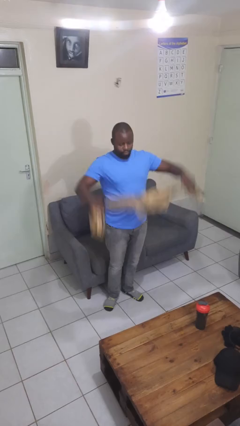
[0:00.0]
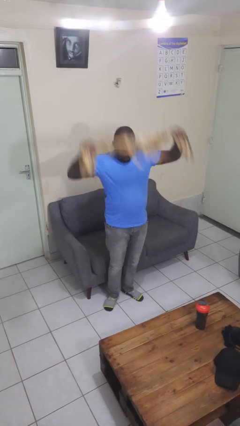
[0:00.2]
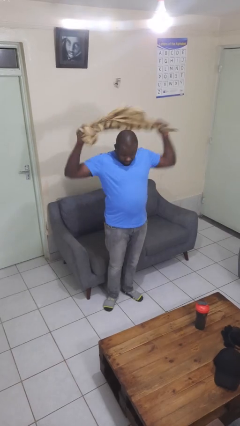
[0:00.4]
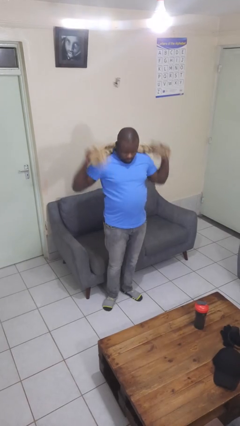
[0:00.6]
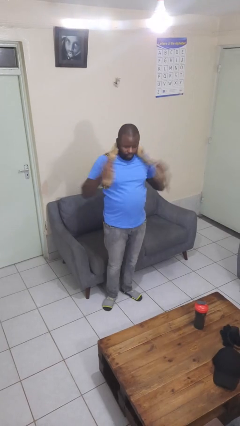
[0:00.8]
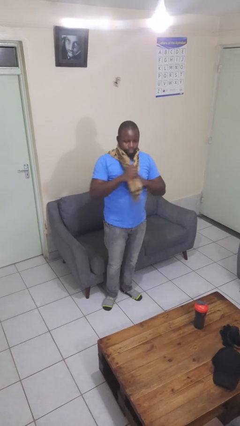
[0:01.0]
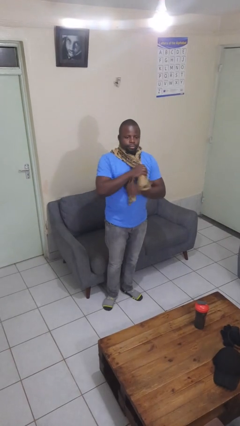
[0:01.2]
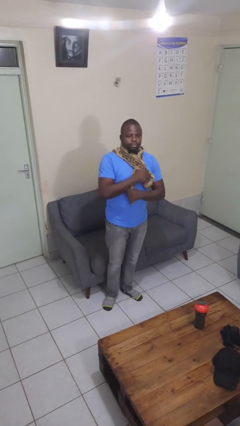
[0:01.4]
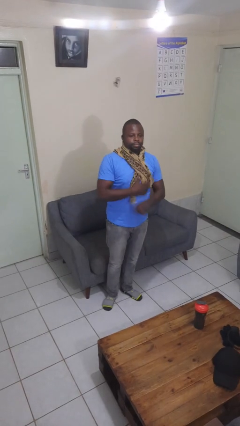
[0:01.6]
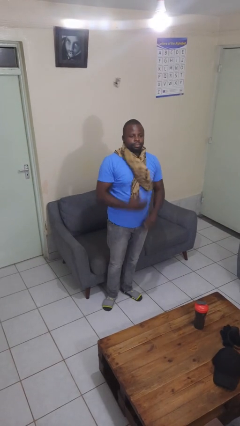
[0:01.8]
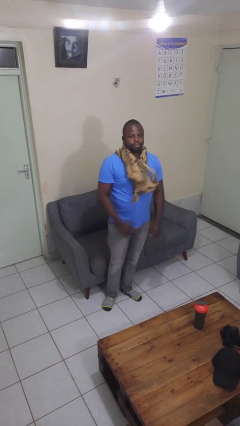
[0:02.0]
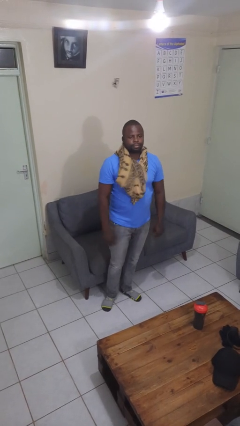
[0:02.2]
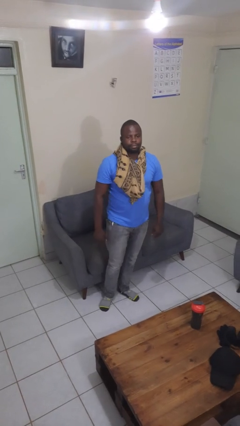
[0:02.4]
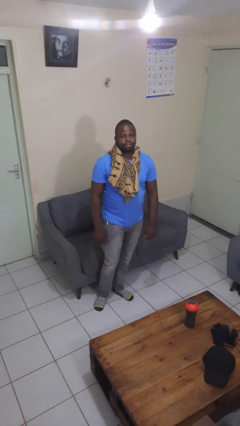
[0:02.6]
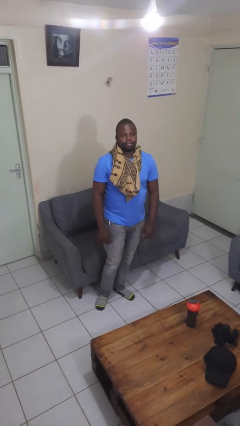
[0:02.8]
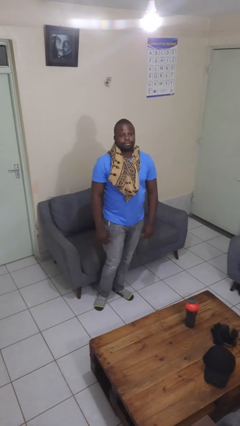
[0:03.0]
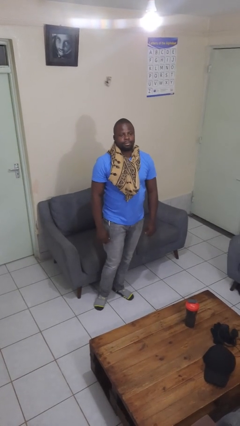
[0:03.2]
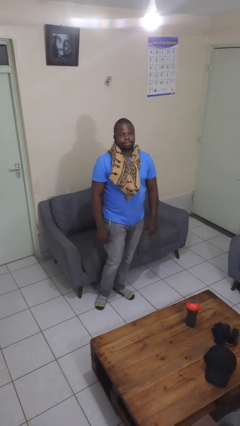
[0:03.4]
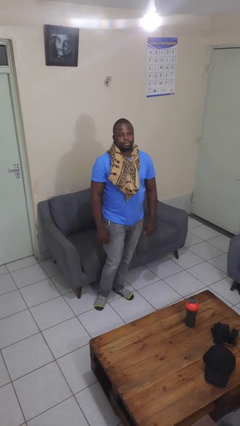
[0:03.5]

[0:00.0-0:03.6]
person puts on scarf

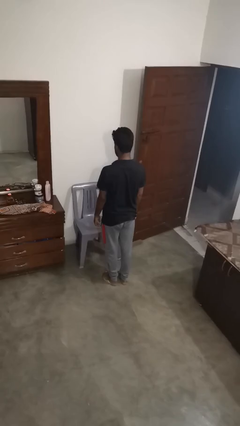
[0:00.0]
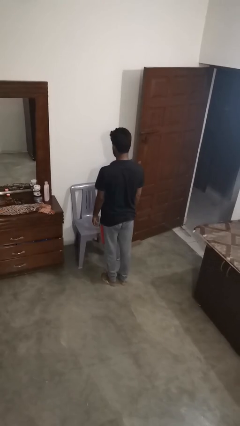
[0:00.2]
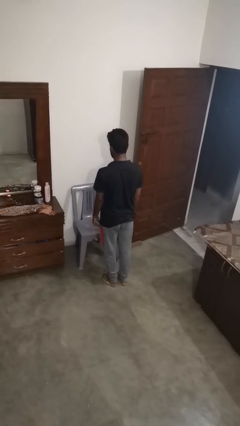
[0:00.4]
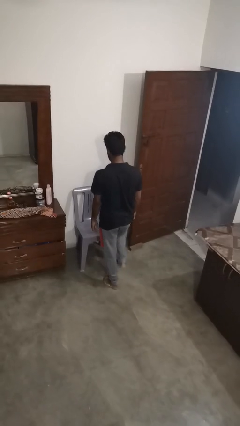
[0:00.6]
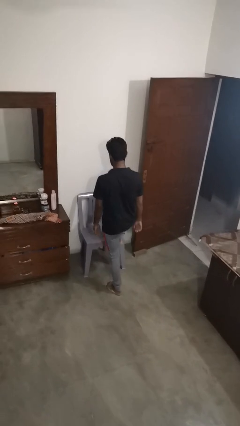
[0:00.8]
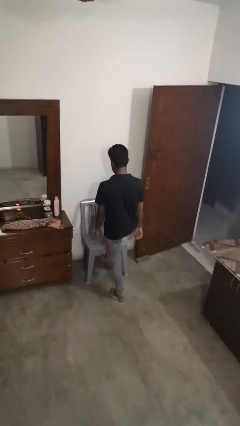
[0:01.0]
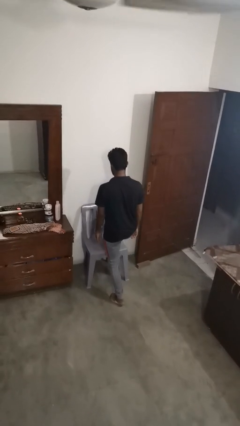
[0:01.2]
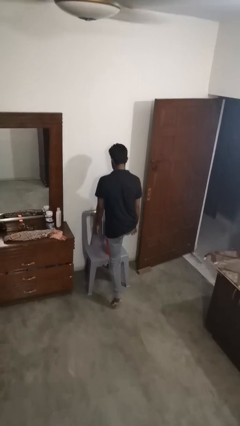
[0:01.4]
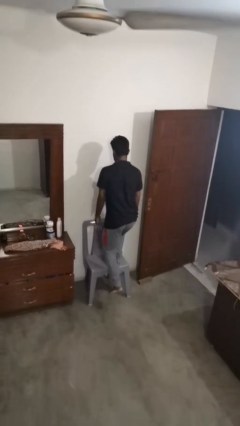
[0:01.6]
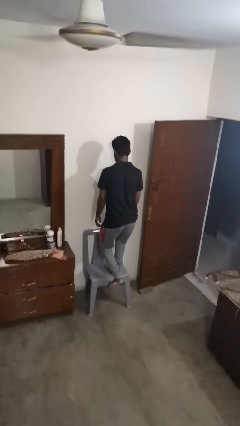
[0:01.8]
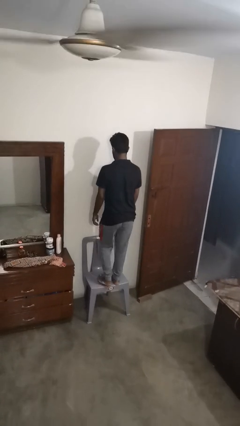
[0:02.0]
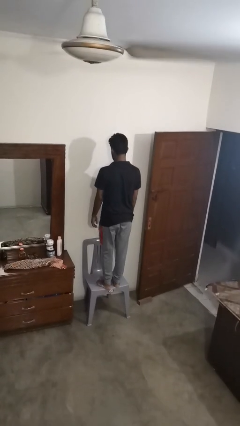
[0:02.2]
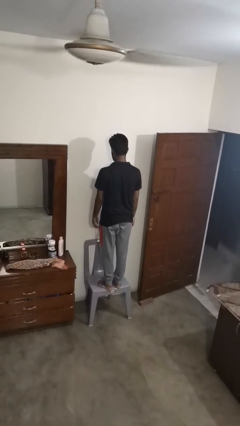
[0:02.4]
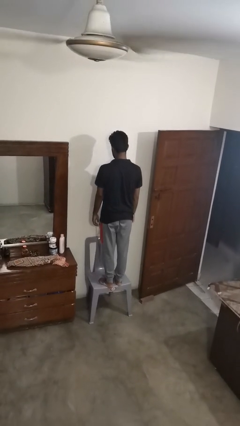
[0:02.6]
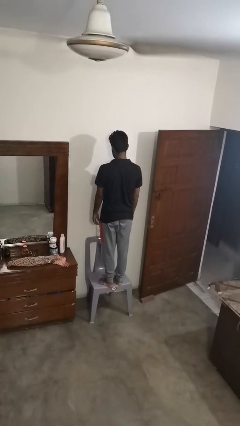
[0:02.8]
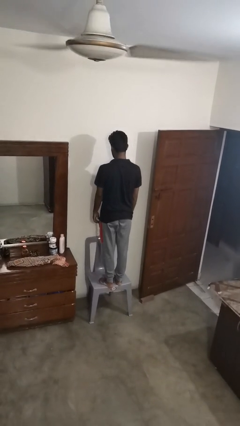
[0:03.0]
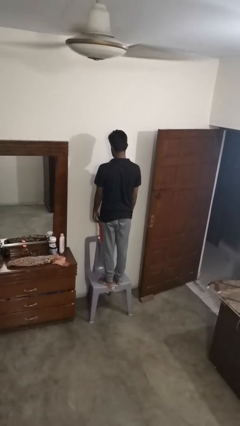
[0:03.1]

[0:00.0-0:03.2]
person climbs on chair

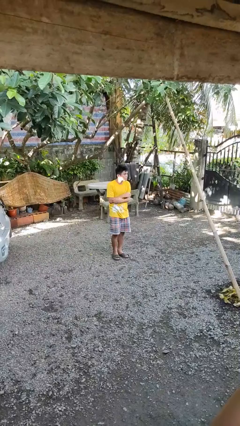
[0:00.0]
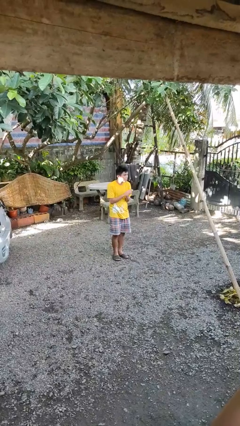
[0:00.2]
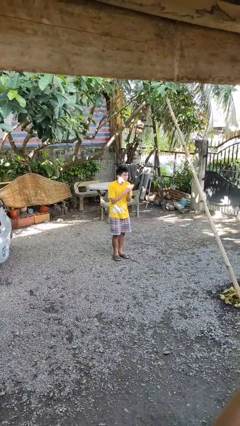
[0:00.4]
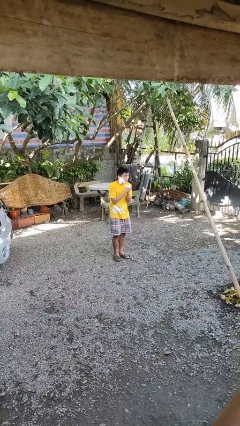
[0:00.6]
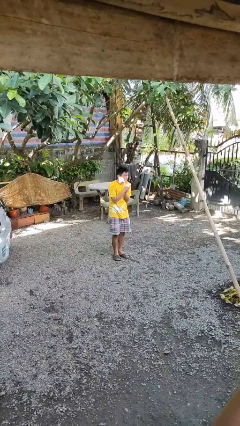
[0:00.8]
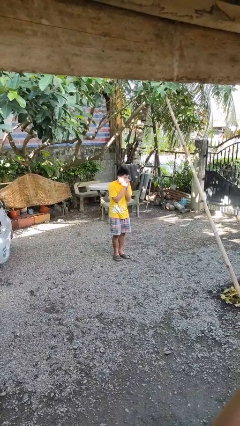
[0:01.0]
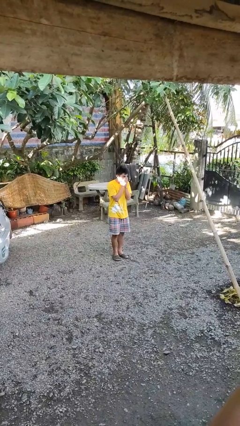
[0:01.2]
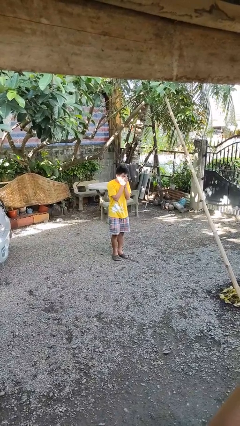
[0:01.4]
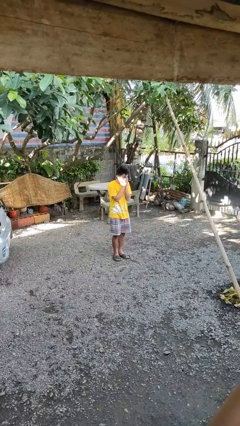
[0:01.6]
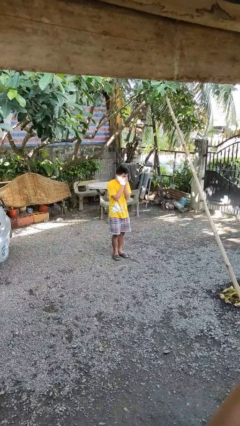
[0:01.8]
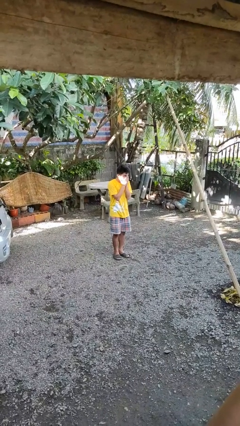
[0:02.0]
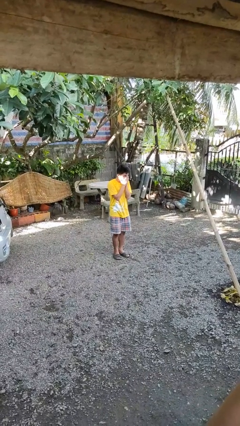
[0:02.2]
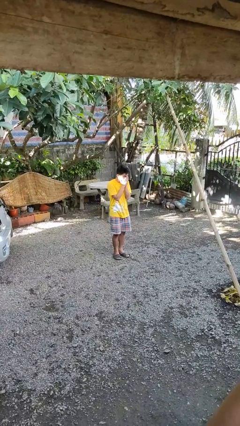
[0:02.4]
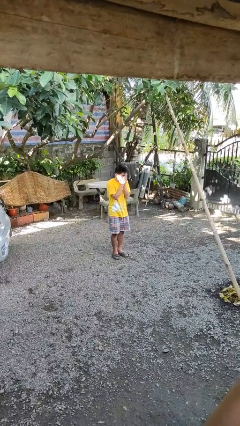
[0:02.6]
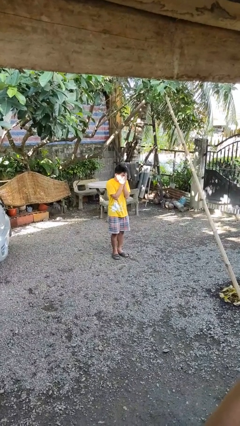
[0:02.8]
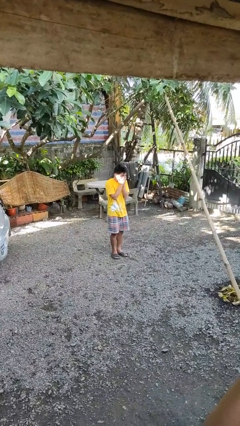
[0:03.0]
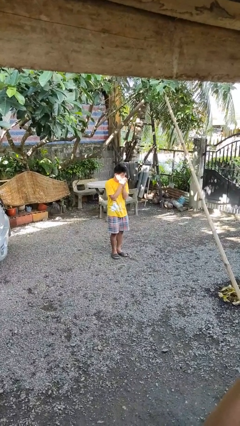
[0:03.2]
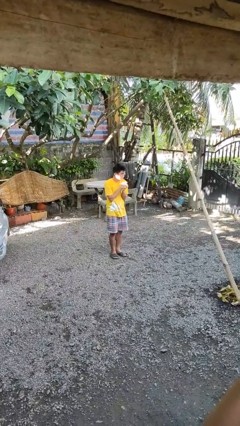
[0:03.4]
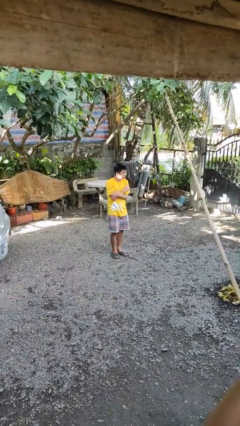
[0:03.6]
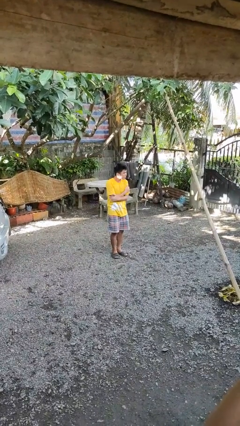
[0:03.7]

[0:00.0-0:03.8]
person blows into hands

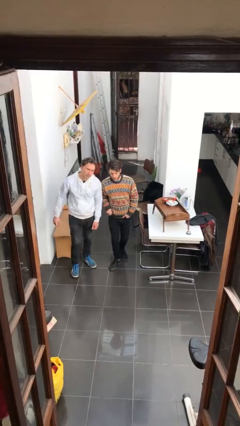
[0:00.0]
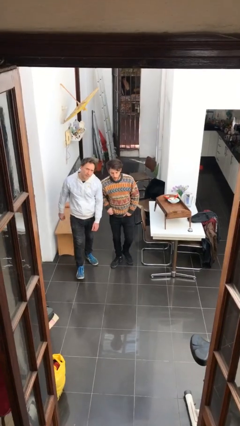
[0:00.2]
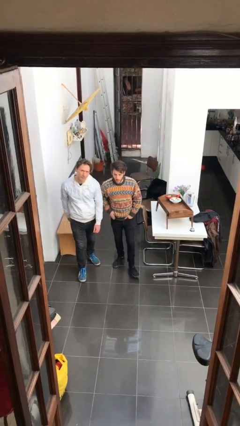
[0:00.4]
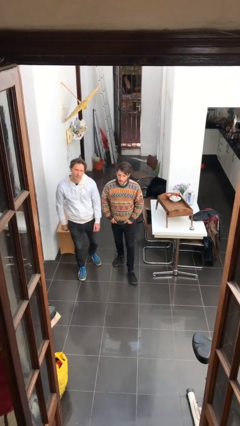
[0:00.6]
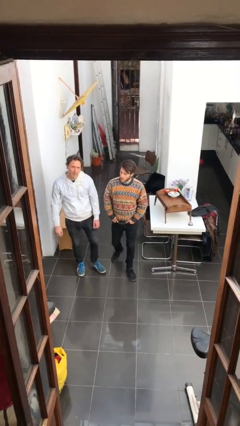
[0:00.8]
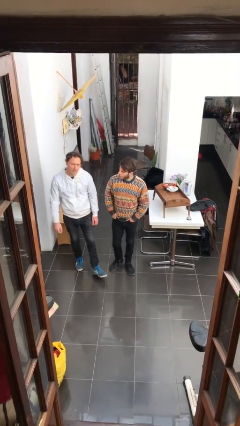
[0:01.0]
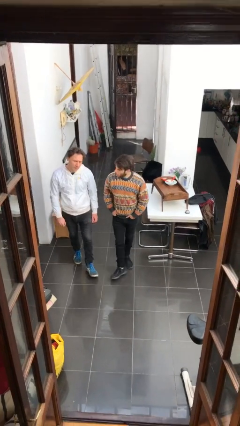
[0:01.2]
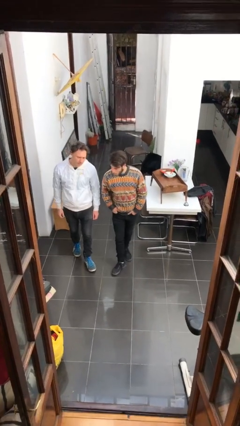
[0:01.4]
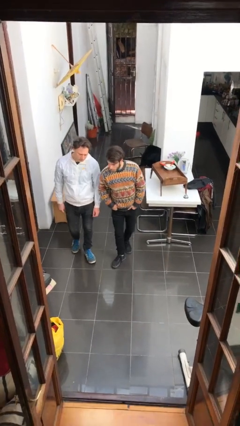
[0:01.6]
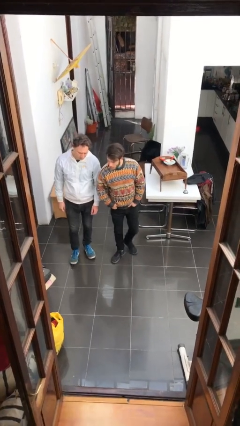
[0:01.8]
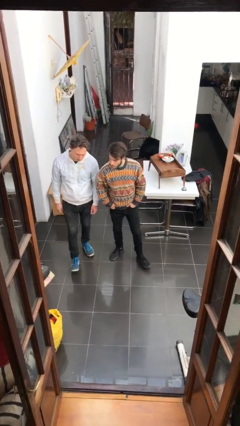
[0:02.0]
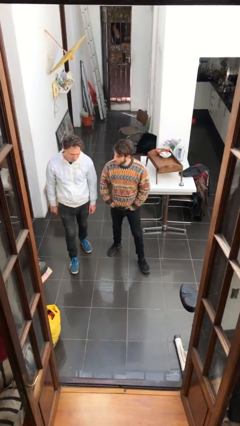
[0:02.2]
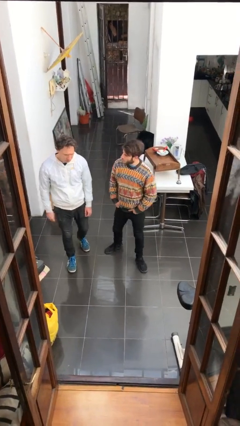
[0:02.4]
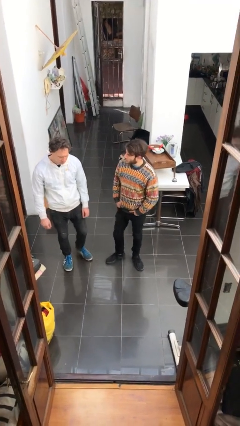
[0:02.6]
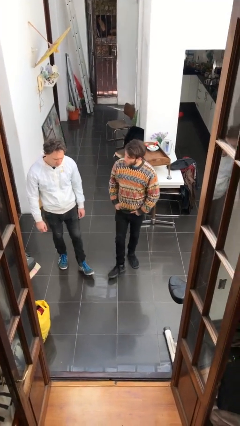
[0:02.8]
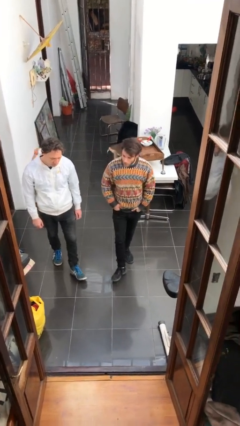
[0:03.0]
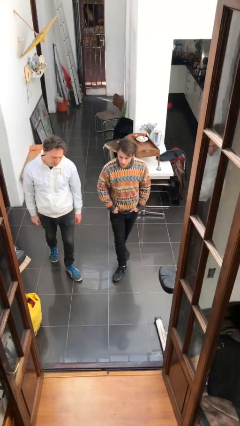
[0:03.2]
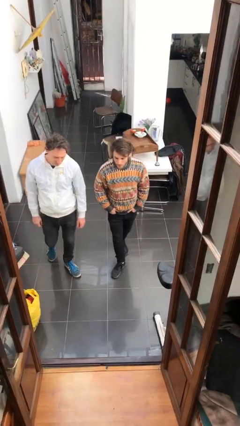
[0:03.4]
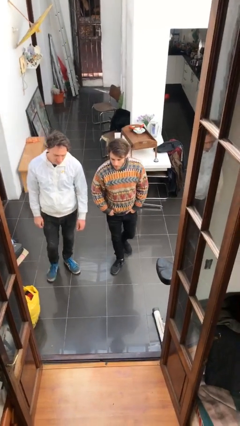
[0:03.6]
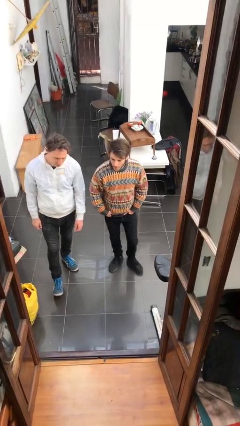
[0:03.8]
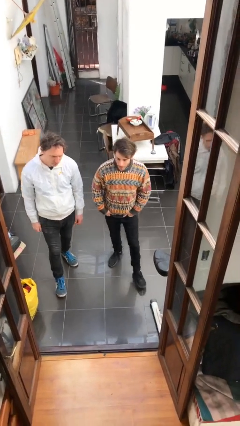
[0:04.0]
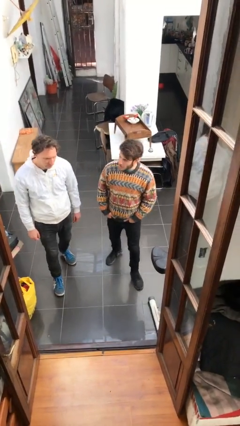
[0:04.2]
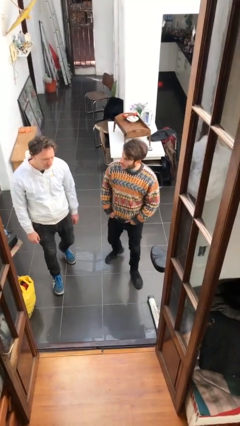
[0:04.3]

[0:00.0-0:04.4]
person talks to person

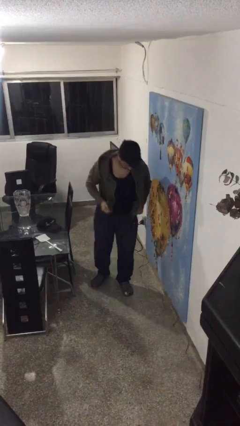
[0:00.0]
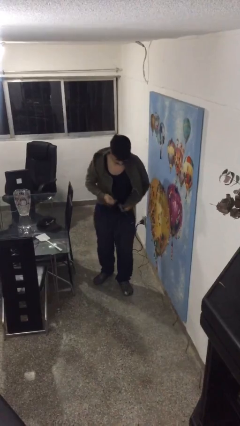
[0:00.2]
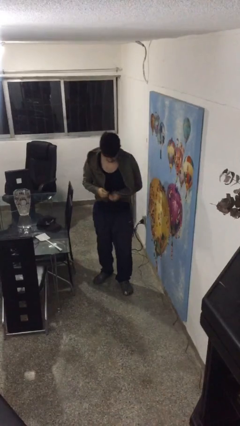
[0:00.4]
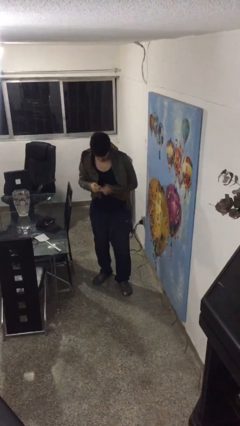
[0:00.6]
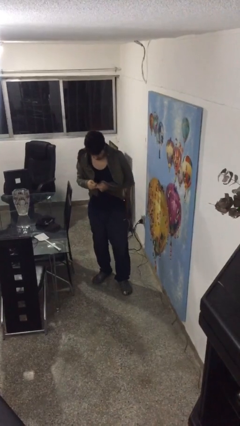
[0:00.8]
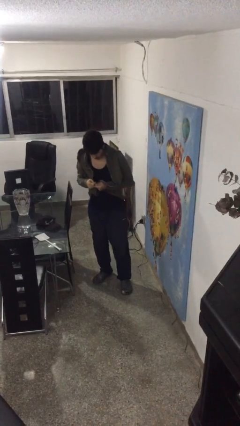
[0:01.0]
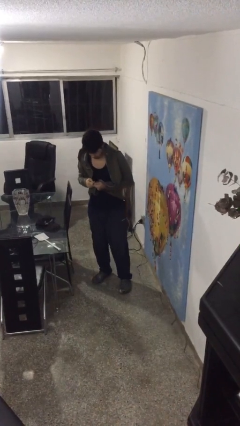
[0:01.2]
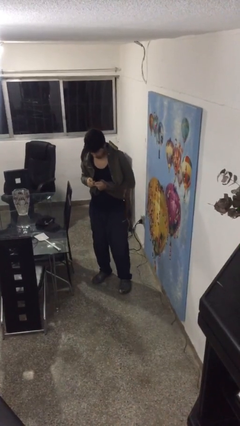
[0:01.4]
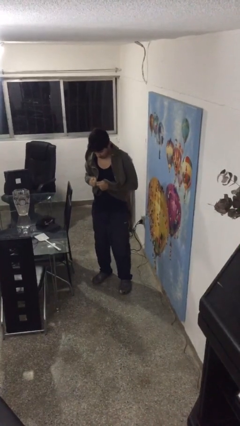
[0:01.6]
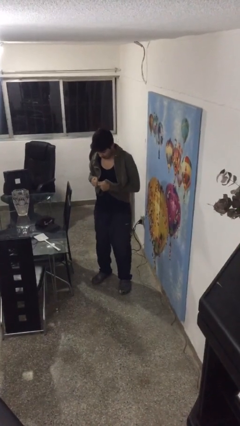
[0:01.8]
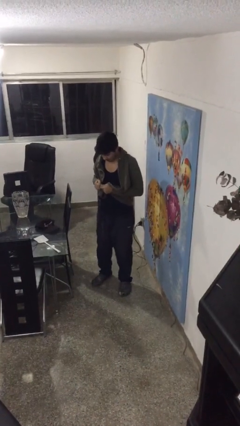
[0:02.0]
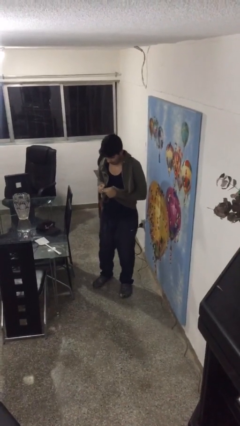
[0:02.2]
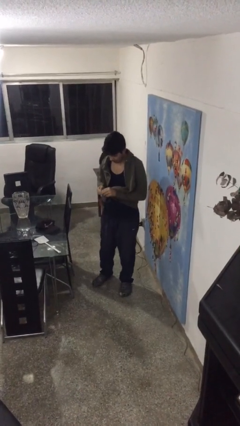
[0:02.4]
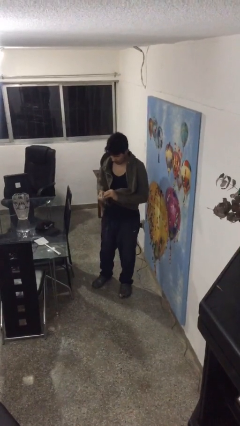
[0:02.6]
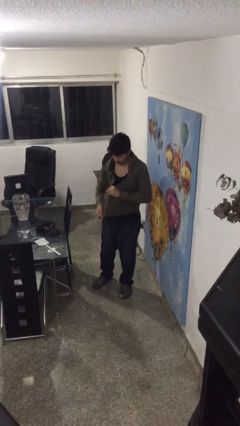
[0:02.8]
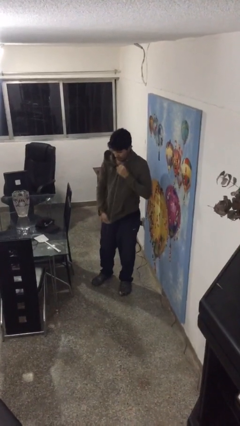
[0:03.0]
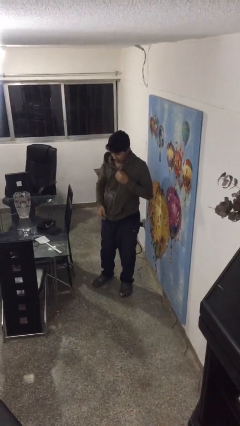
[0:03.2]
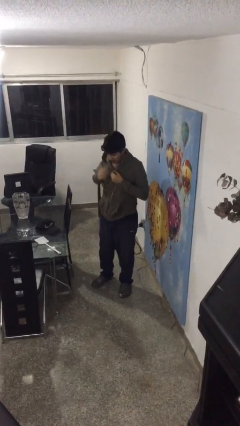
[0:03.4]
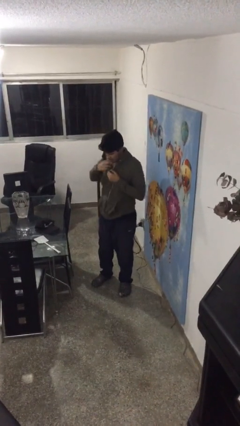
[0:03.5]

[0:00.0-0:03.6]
person zips up jacket
